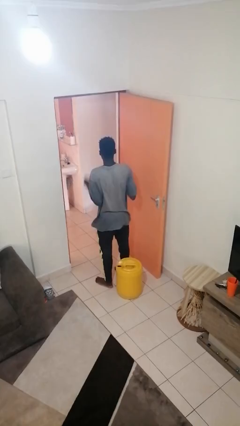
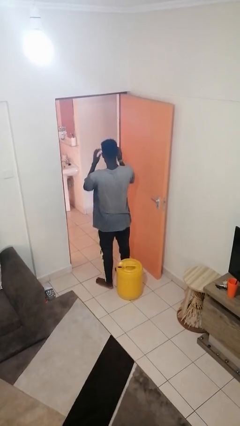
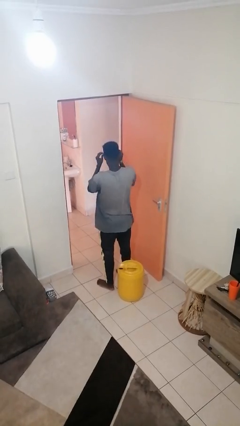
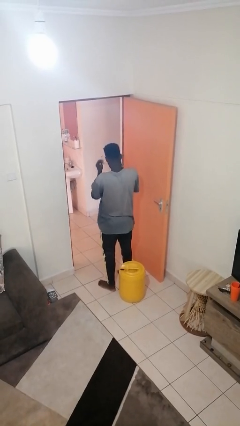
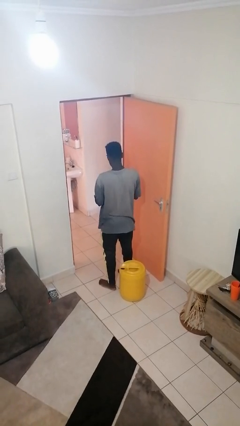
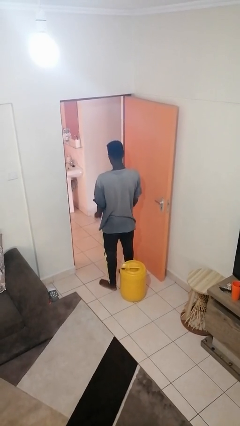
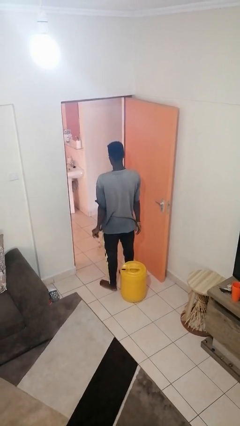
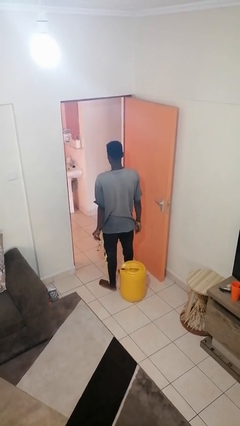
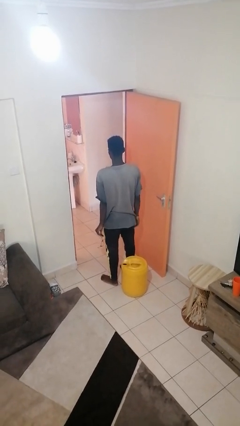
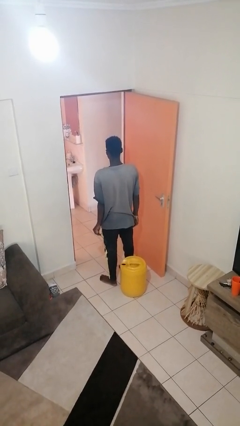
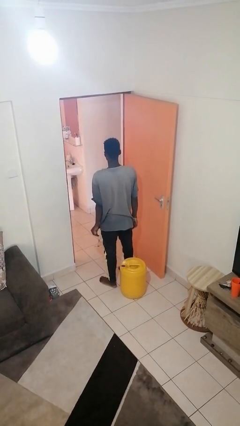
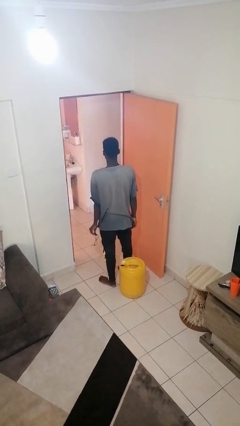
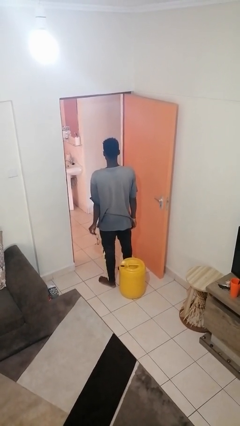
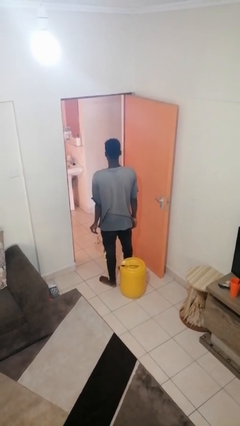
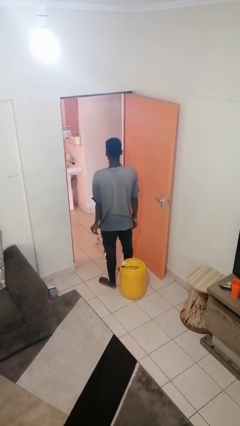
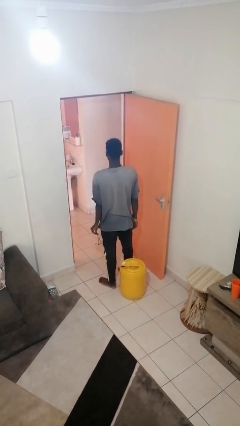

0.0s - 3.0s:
person takes off glasses

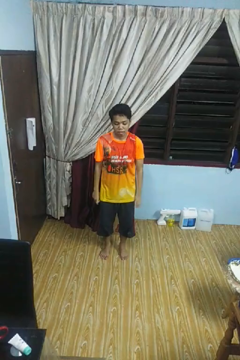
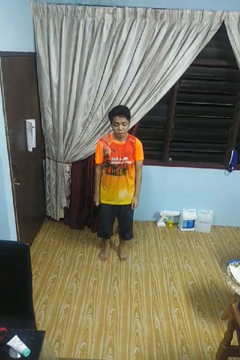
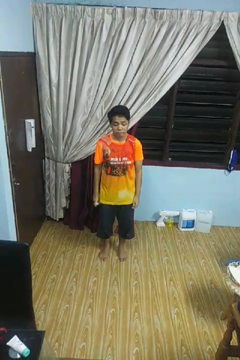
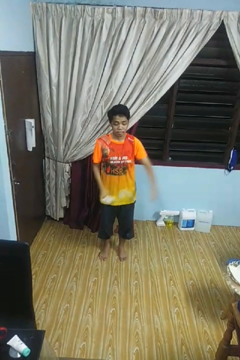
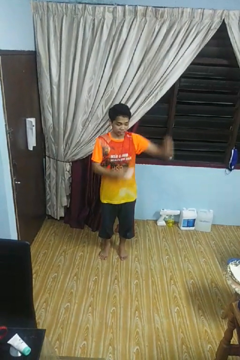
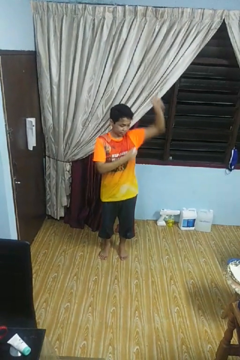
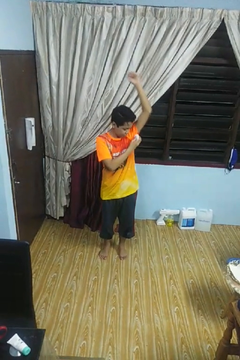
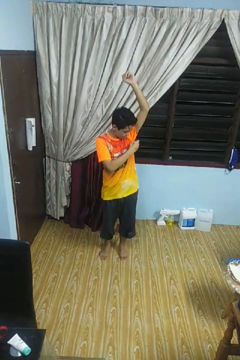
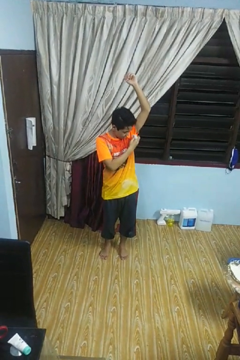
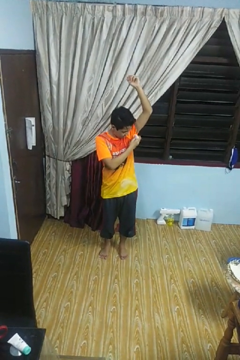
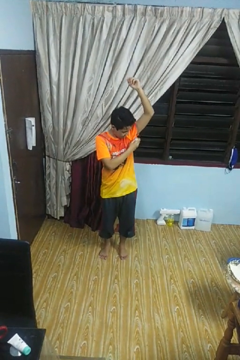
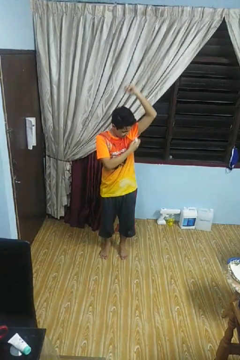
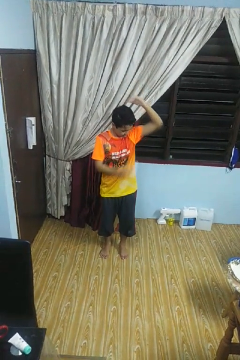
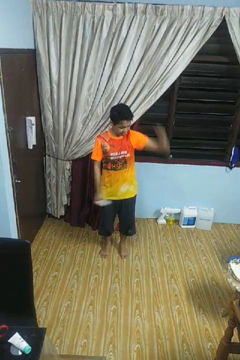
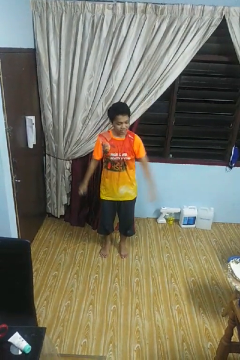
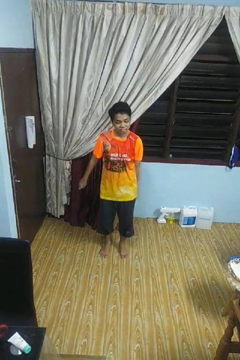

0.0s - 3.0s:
person applies deodorant

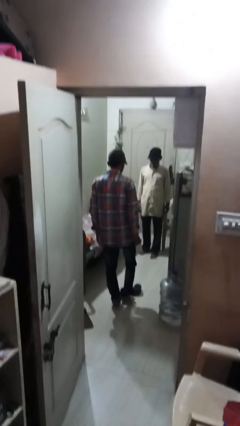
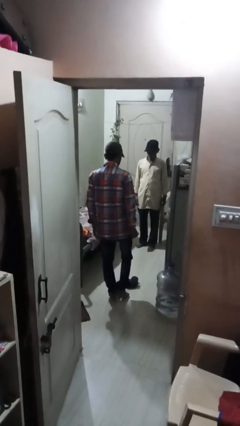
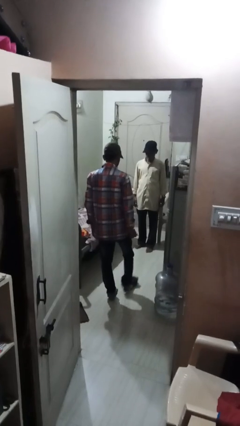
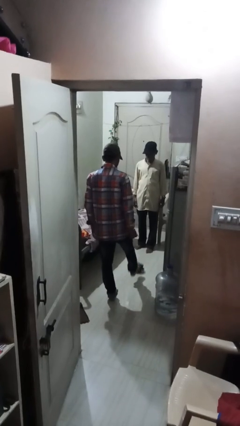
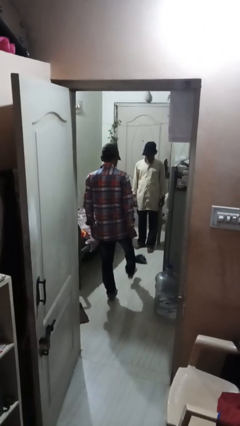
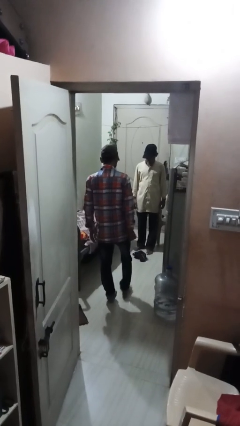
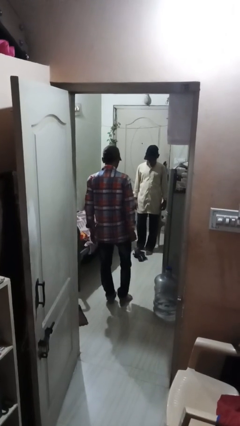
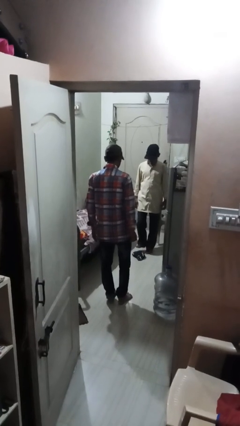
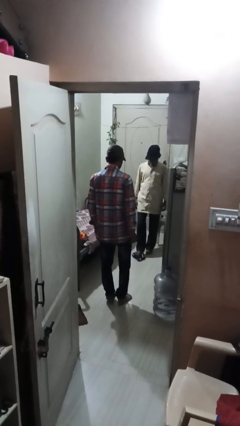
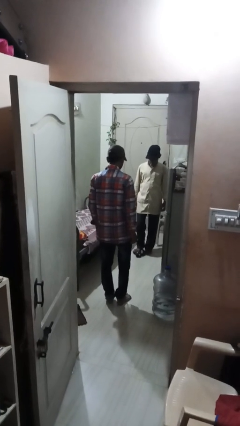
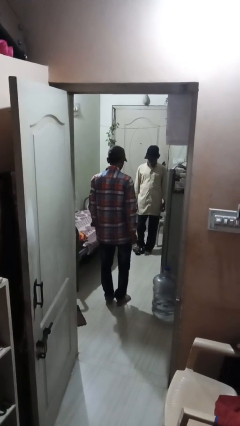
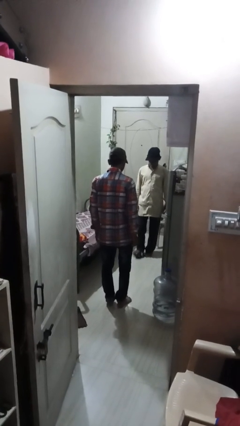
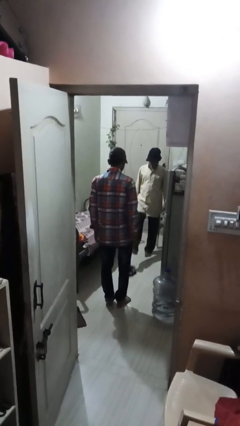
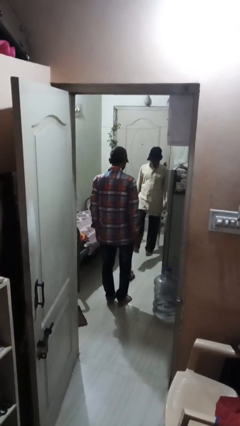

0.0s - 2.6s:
person kicks object to person

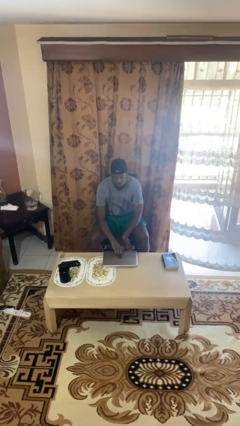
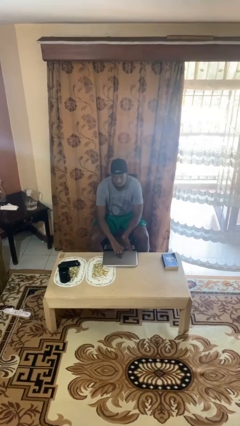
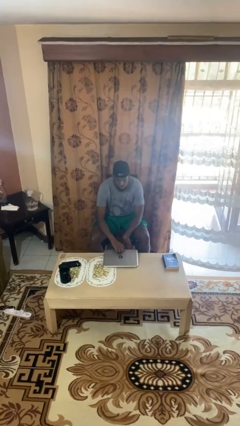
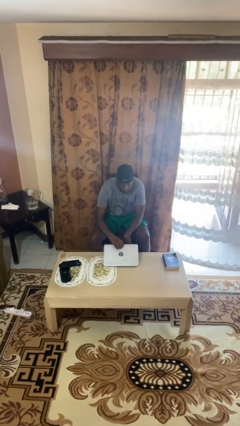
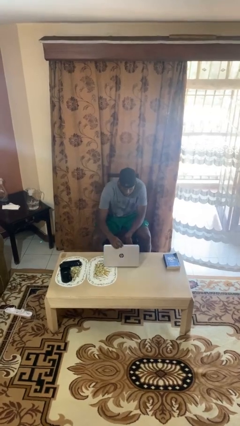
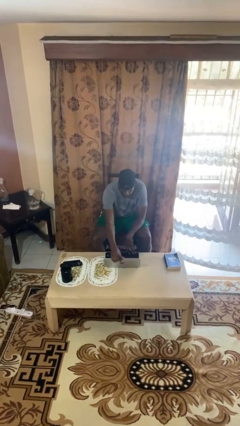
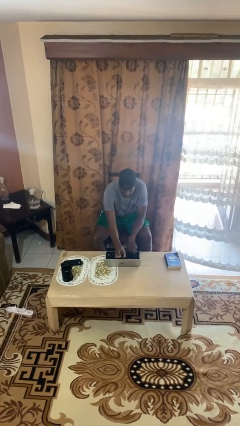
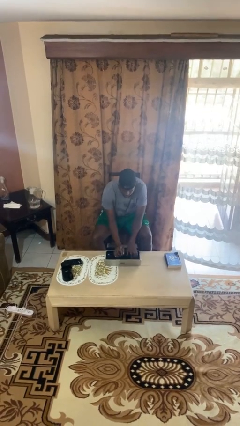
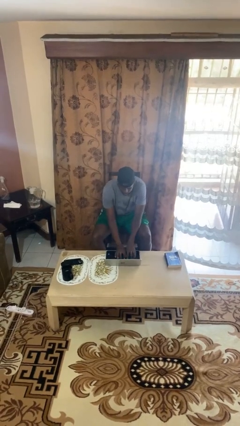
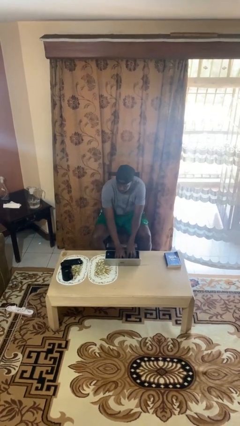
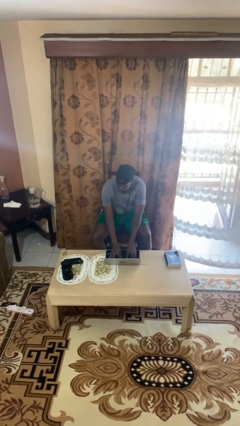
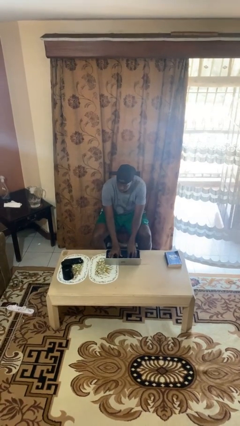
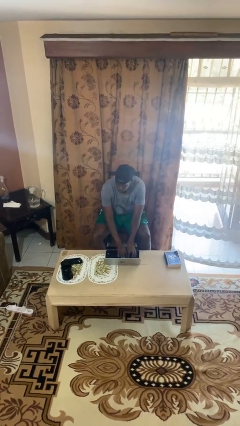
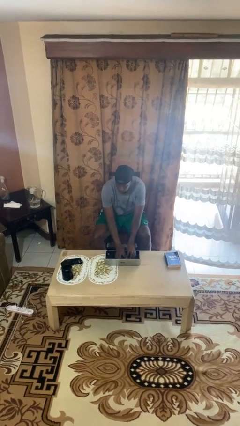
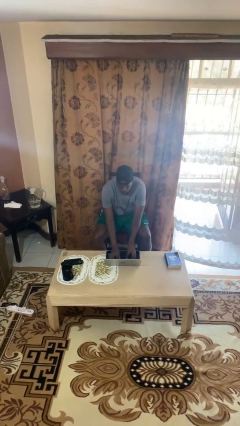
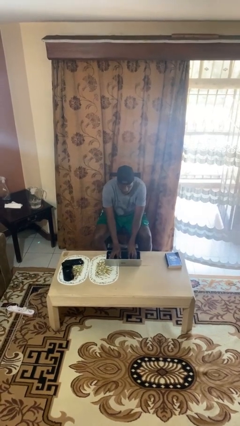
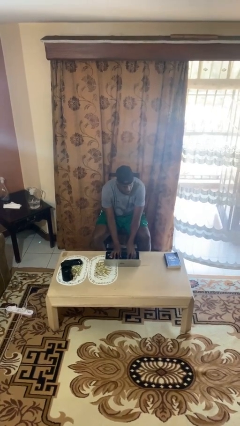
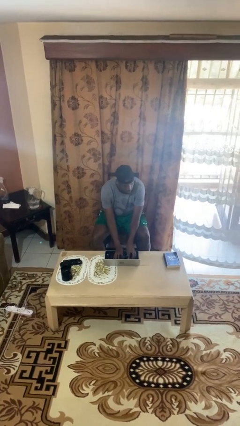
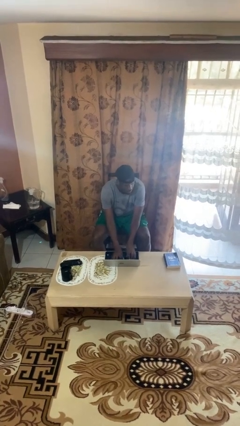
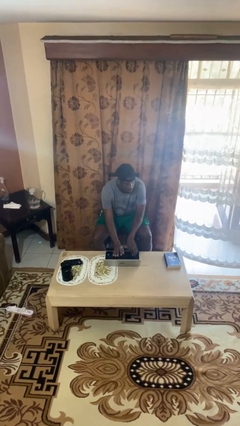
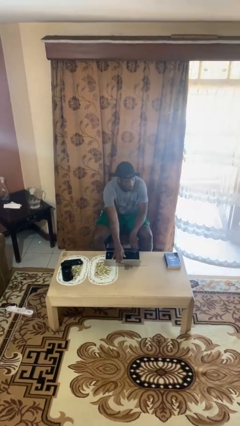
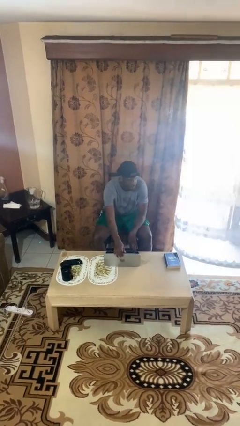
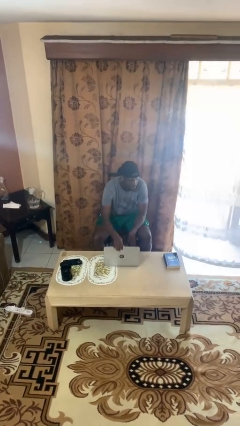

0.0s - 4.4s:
person interacts with laptop

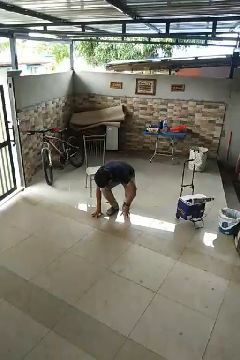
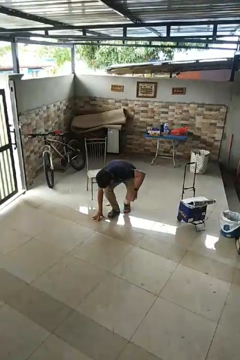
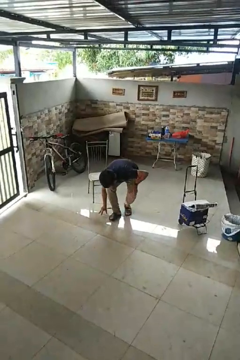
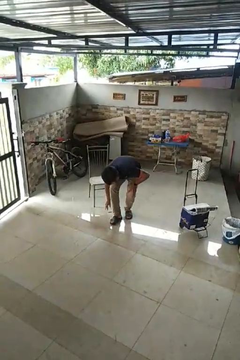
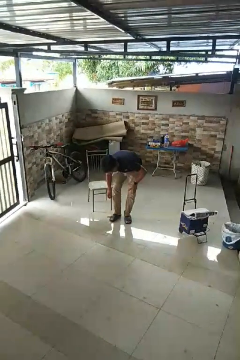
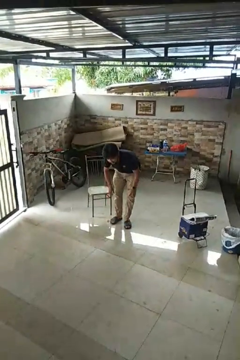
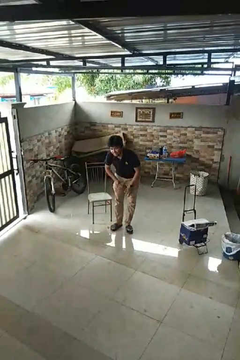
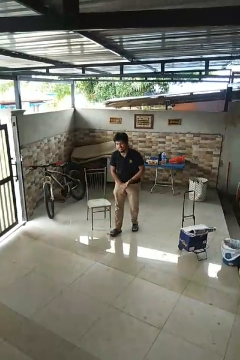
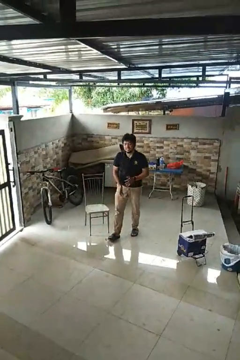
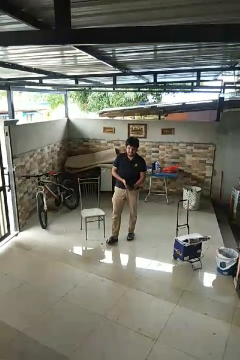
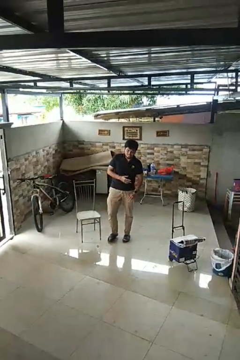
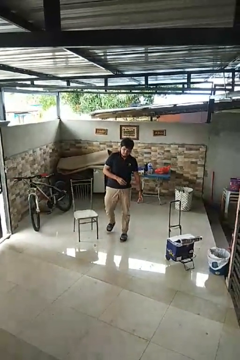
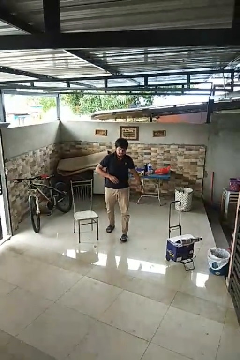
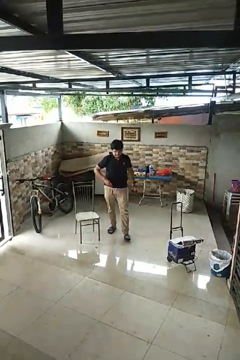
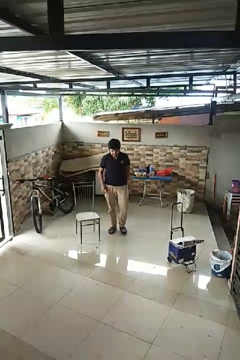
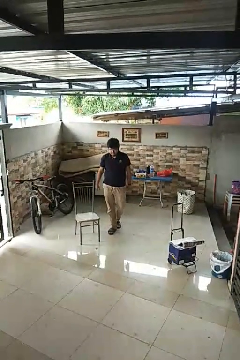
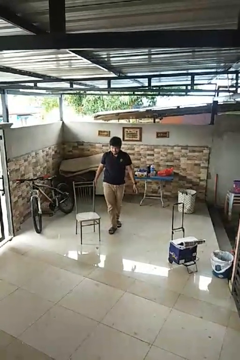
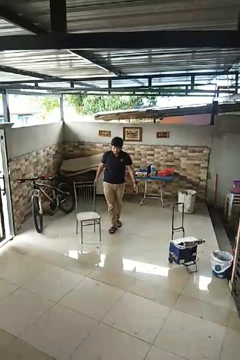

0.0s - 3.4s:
person stands up from floor

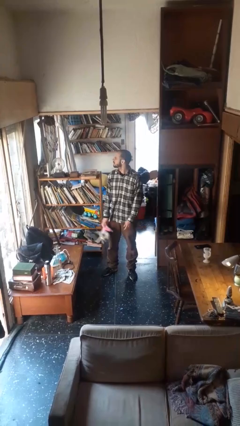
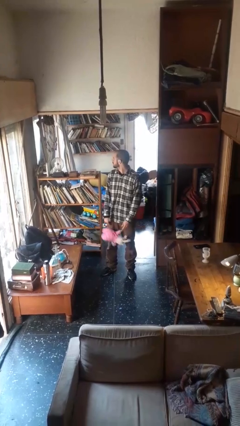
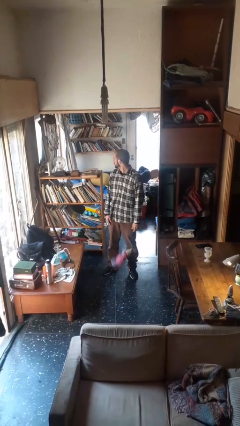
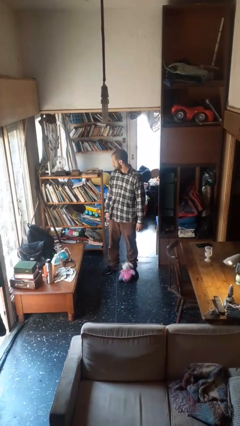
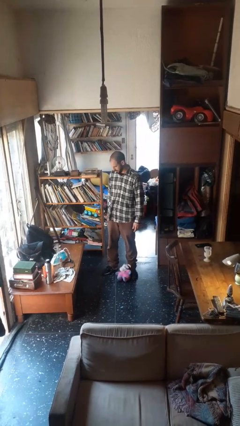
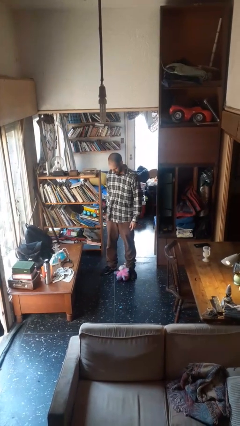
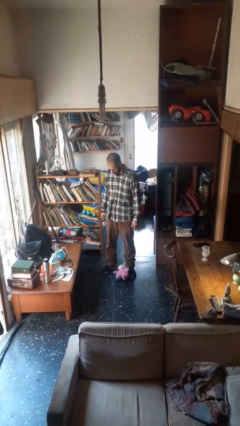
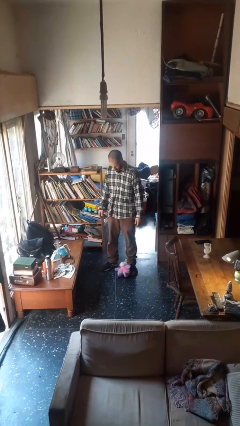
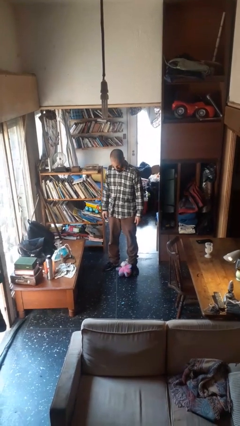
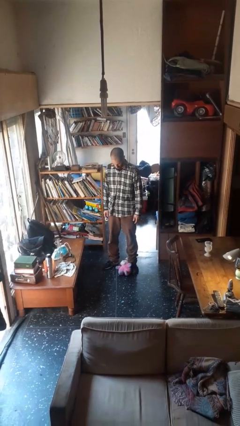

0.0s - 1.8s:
person drops object

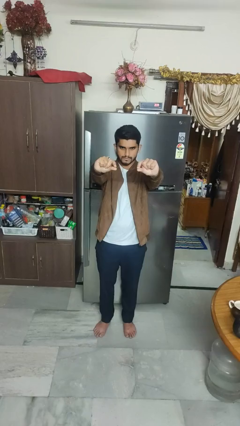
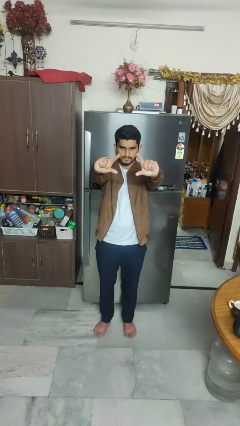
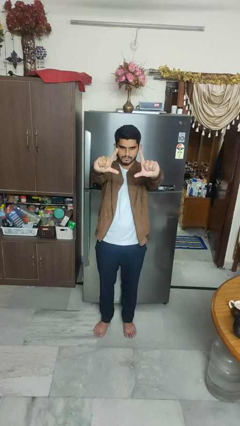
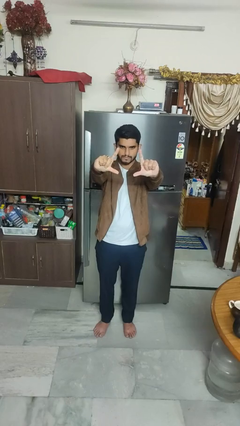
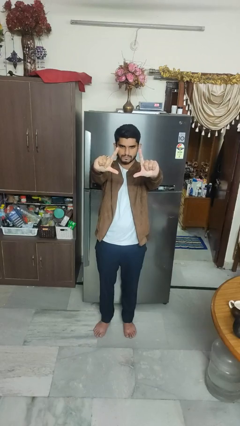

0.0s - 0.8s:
person gestures zoom out
